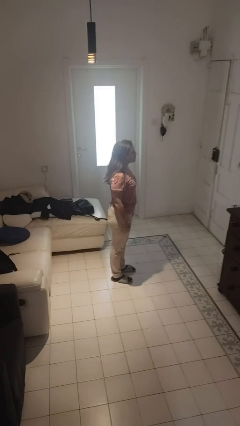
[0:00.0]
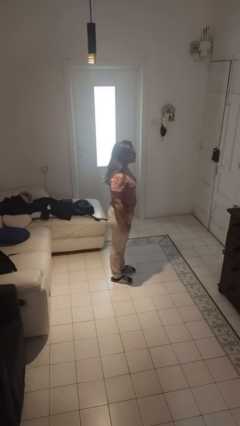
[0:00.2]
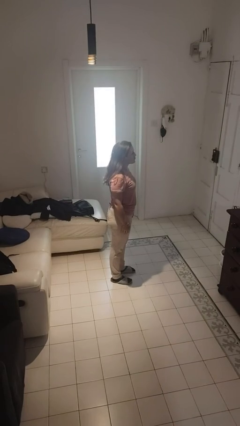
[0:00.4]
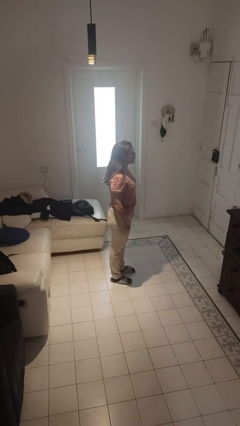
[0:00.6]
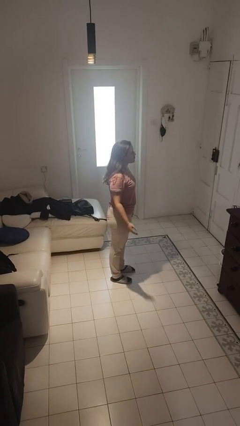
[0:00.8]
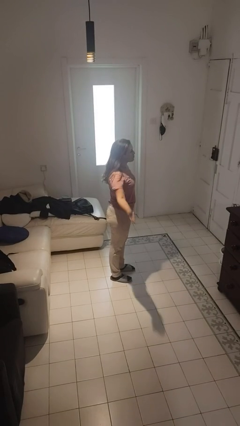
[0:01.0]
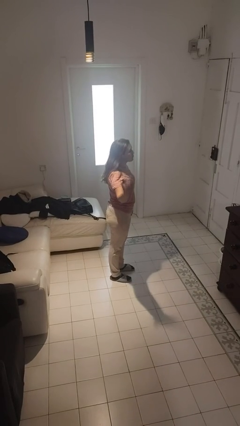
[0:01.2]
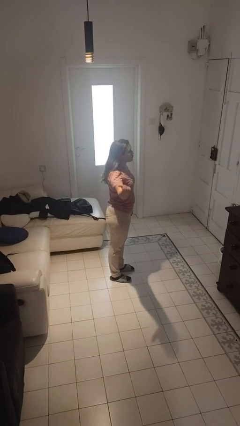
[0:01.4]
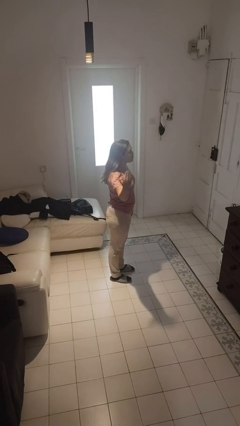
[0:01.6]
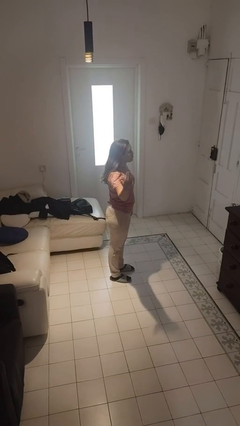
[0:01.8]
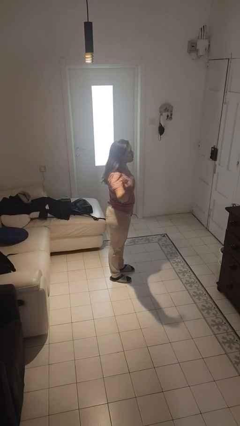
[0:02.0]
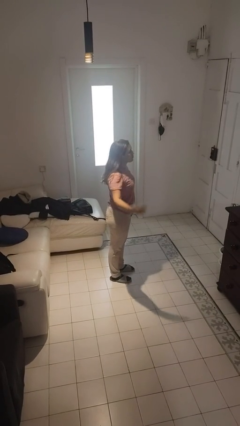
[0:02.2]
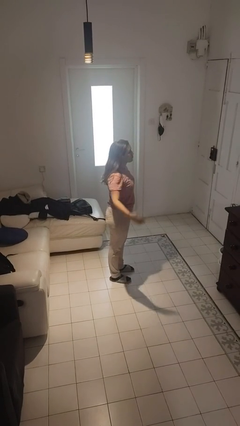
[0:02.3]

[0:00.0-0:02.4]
person gestures come here

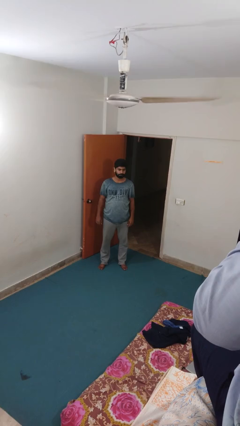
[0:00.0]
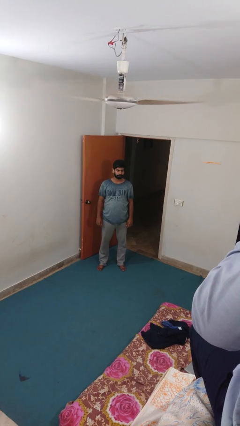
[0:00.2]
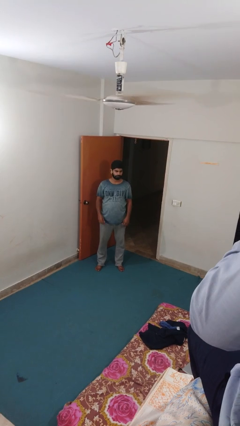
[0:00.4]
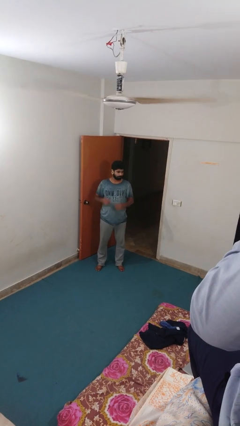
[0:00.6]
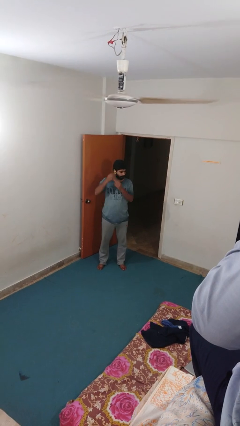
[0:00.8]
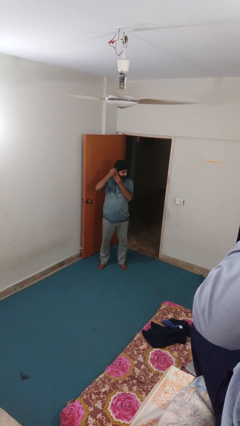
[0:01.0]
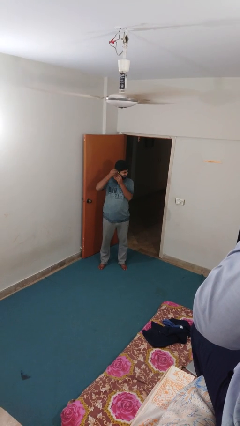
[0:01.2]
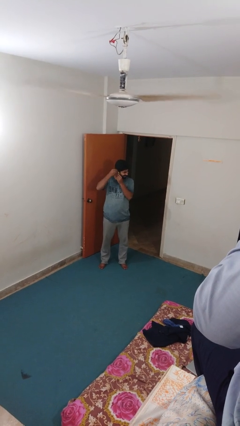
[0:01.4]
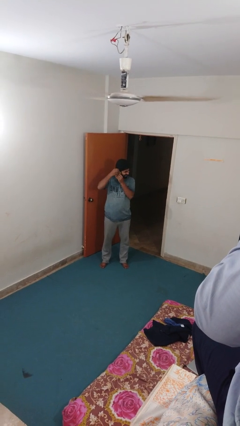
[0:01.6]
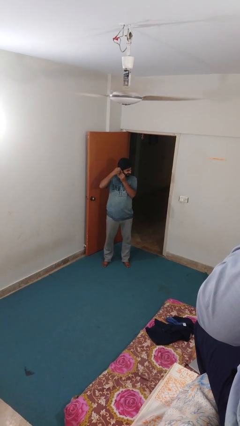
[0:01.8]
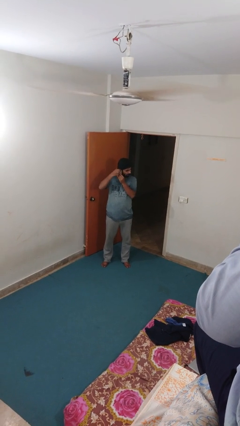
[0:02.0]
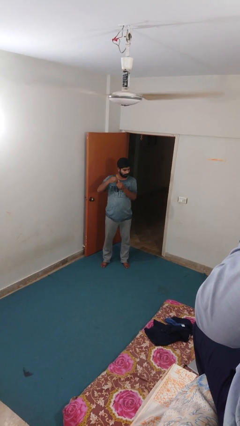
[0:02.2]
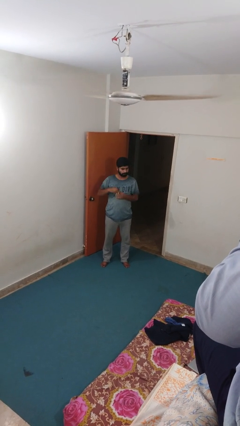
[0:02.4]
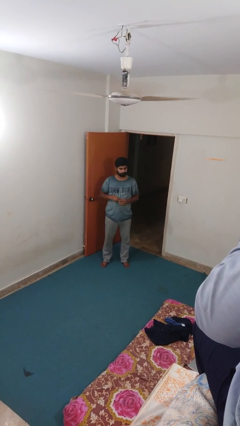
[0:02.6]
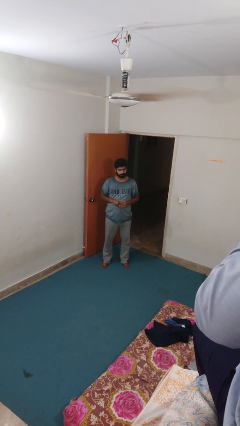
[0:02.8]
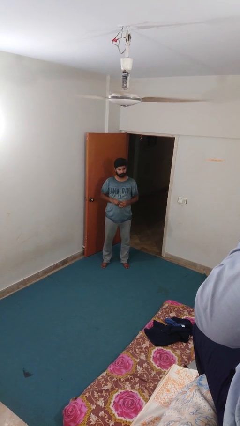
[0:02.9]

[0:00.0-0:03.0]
person takes off earrings

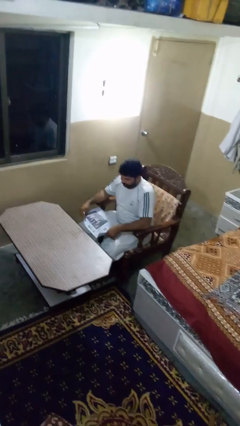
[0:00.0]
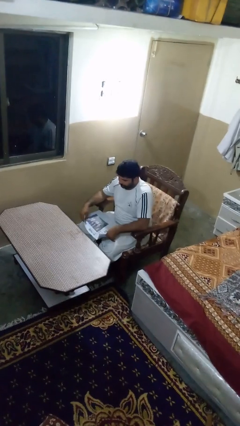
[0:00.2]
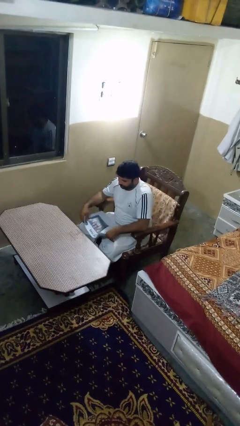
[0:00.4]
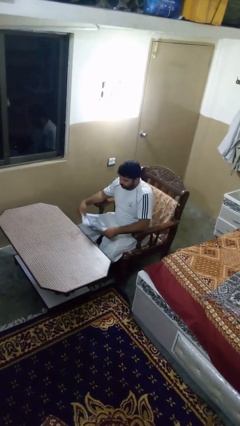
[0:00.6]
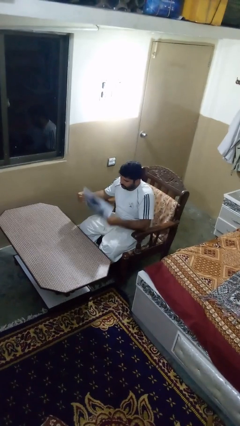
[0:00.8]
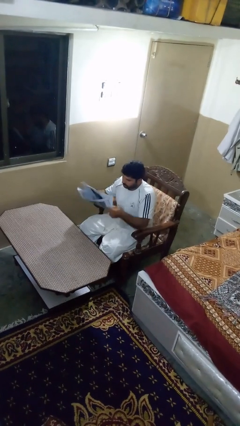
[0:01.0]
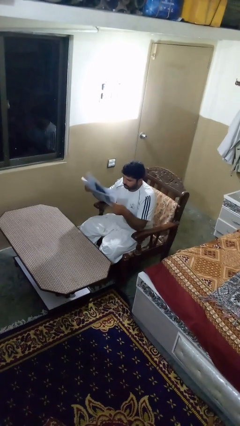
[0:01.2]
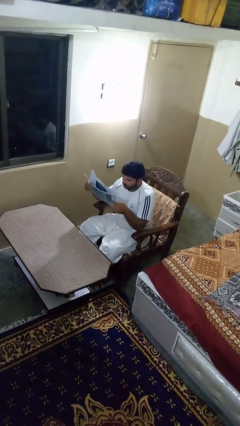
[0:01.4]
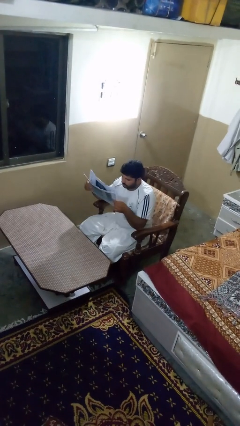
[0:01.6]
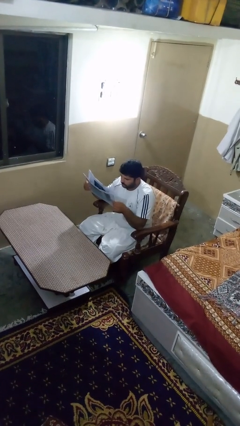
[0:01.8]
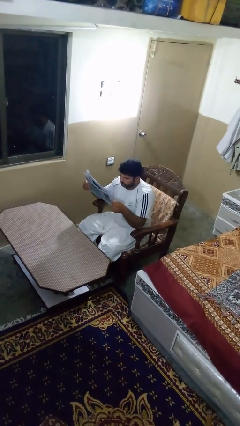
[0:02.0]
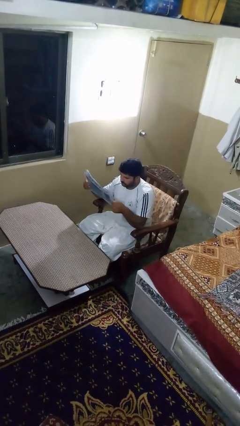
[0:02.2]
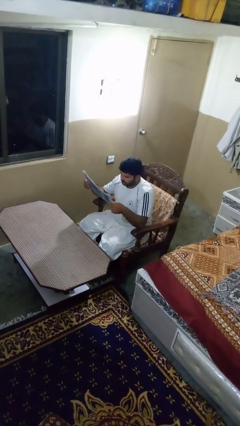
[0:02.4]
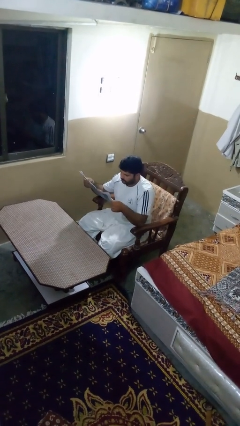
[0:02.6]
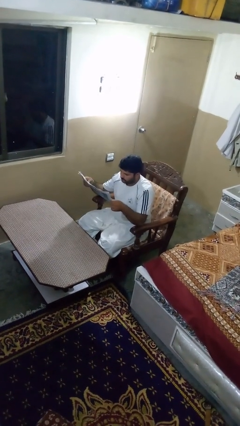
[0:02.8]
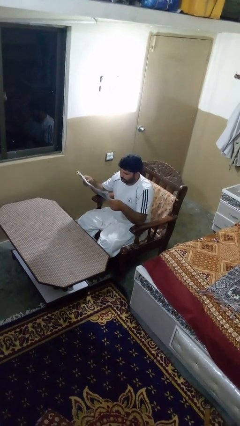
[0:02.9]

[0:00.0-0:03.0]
person reads newspaper

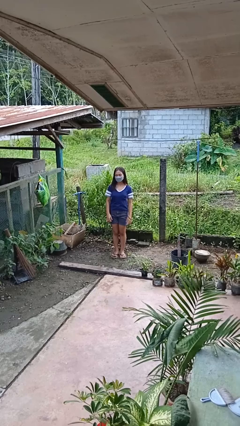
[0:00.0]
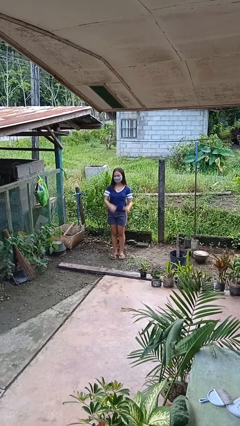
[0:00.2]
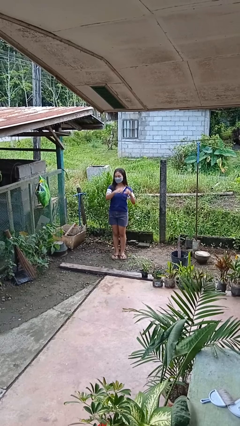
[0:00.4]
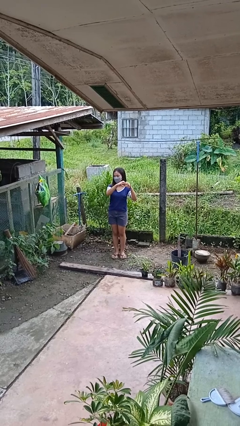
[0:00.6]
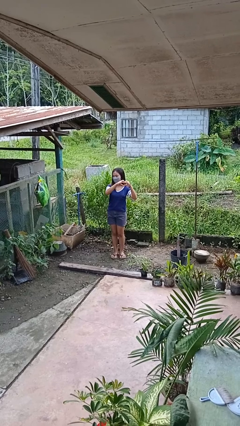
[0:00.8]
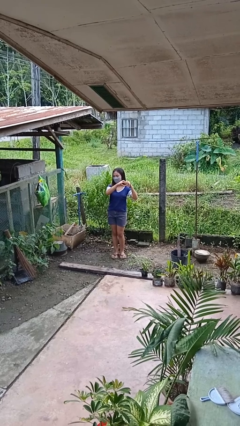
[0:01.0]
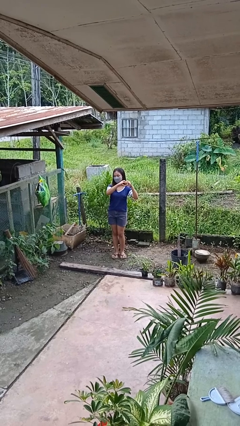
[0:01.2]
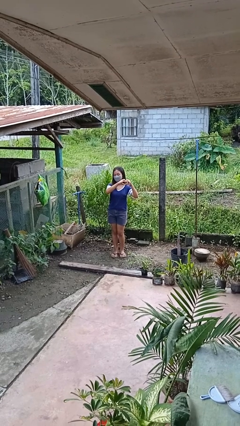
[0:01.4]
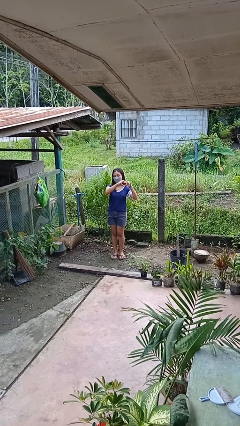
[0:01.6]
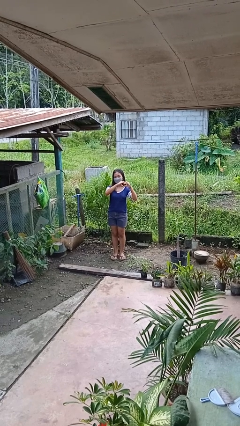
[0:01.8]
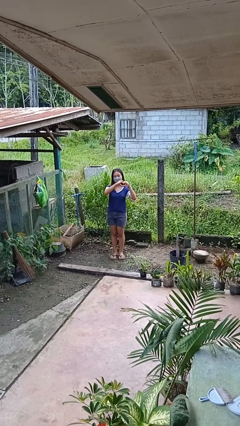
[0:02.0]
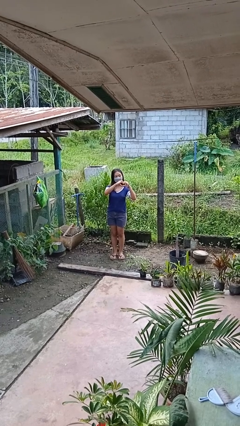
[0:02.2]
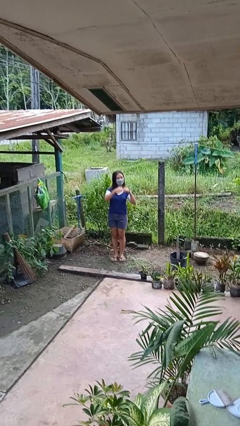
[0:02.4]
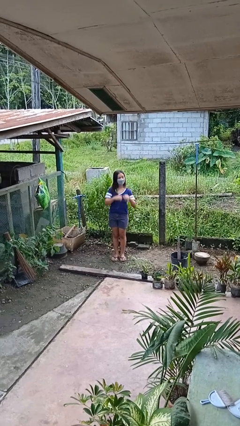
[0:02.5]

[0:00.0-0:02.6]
person gestures heart

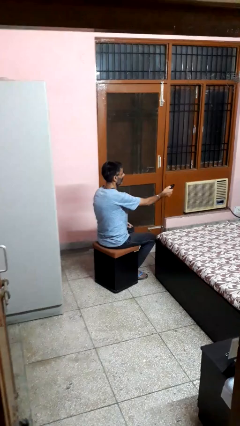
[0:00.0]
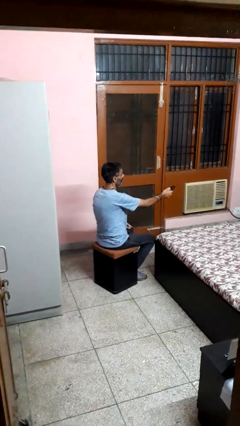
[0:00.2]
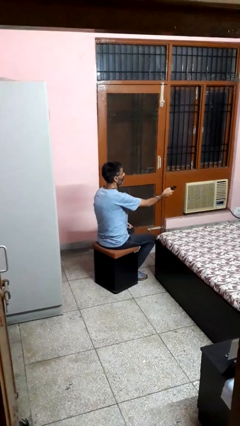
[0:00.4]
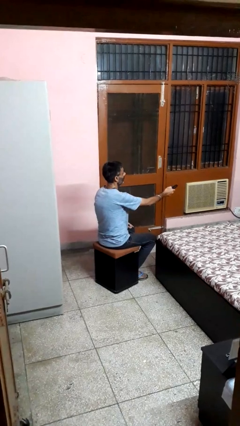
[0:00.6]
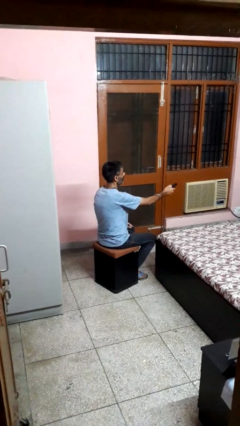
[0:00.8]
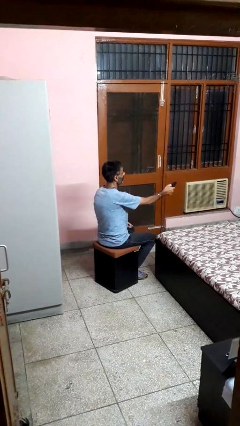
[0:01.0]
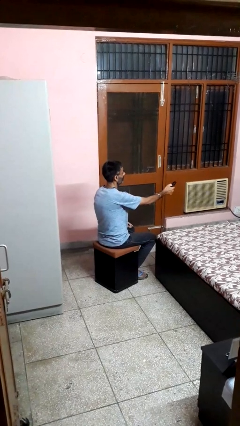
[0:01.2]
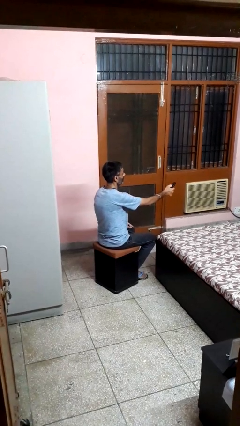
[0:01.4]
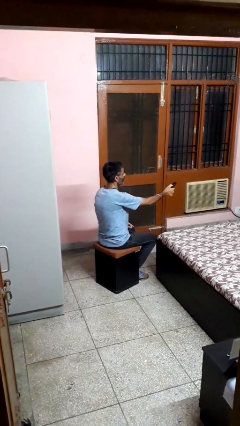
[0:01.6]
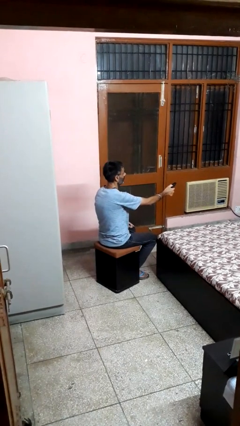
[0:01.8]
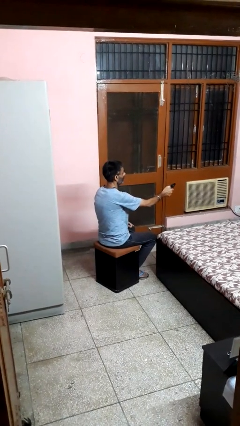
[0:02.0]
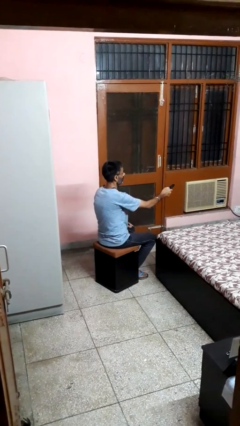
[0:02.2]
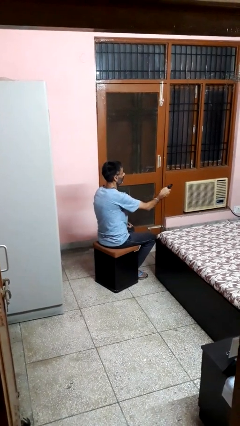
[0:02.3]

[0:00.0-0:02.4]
person uses television remote

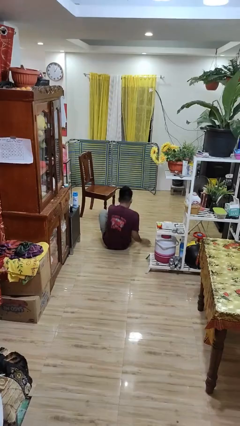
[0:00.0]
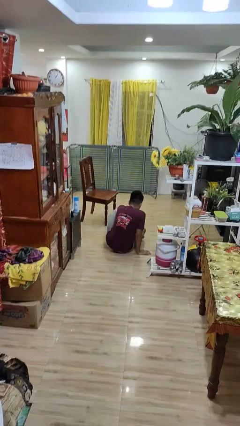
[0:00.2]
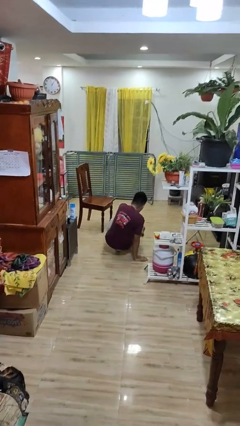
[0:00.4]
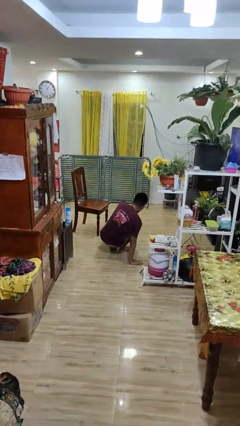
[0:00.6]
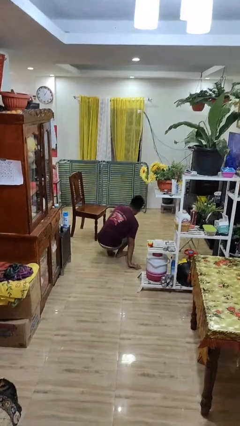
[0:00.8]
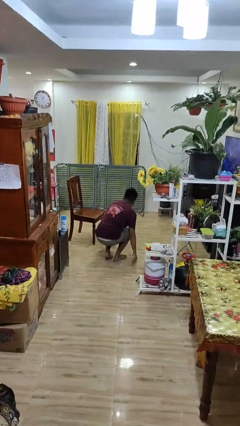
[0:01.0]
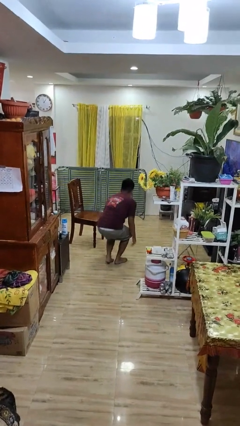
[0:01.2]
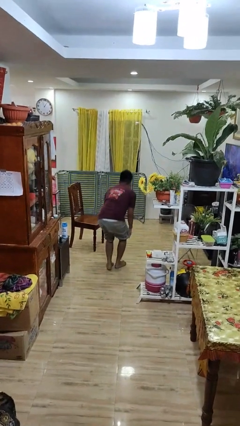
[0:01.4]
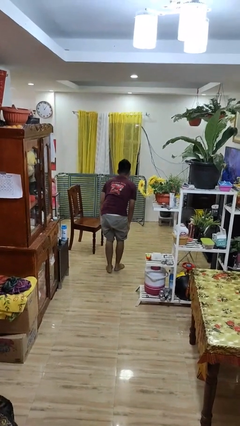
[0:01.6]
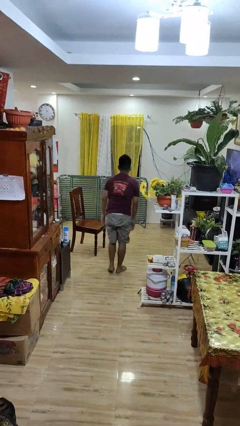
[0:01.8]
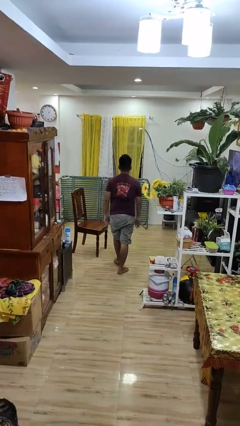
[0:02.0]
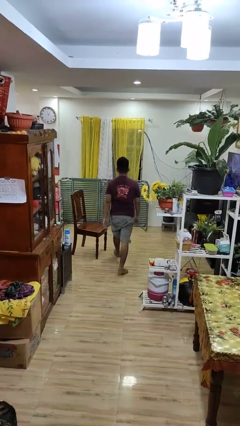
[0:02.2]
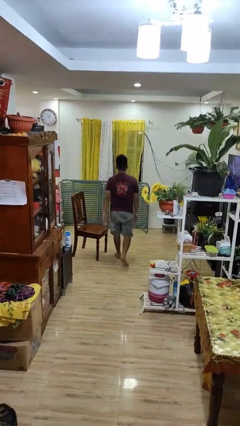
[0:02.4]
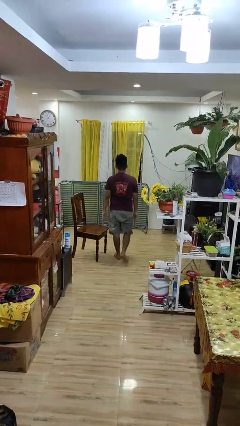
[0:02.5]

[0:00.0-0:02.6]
person stands up from floor

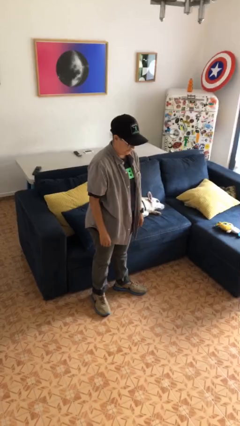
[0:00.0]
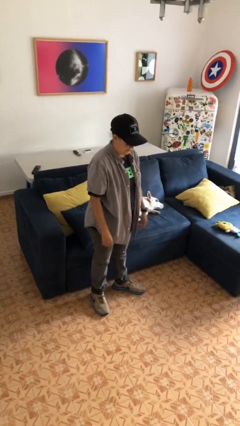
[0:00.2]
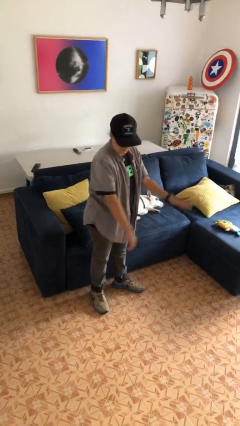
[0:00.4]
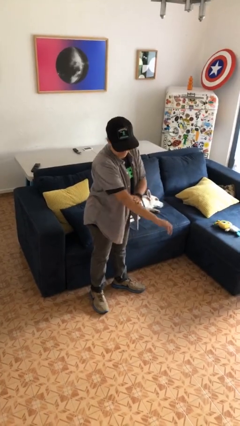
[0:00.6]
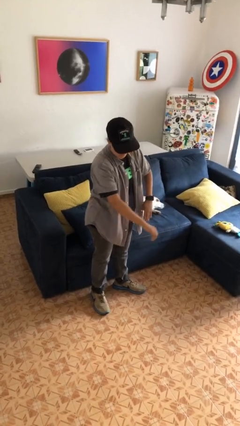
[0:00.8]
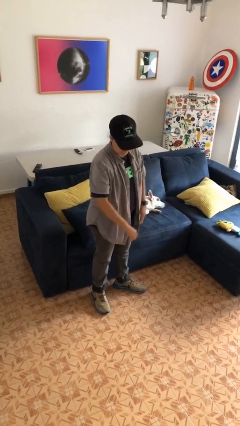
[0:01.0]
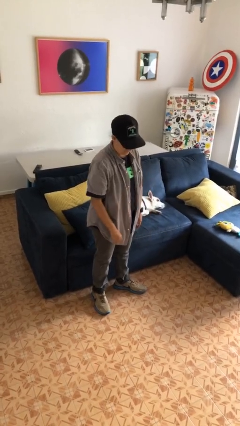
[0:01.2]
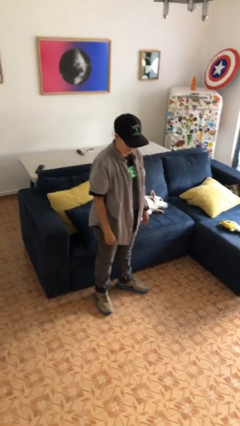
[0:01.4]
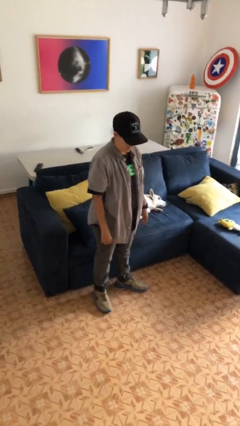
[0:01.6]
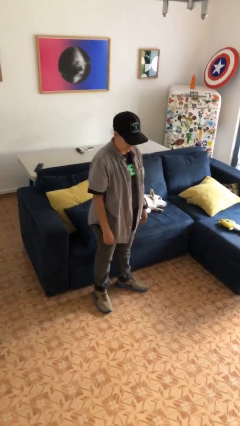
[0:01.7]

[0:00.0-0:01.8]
person swats bug
